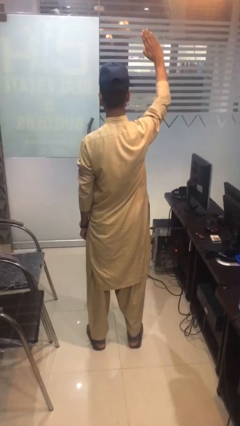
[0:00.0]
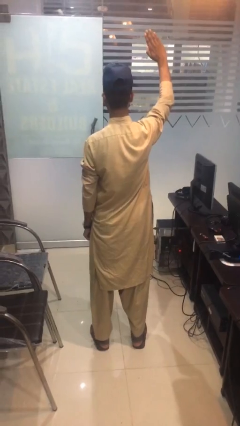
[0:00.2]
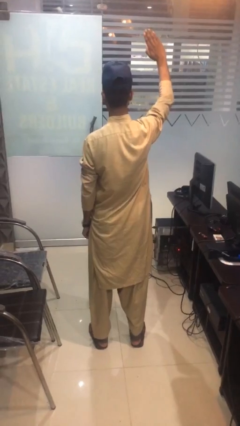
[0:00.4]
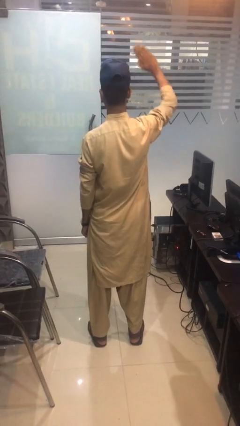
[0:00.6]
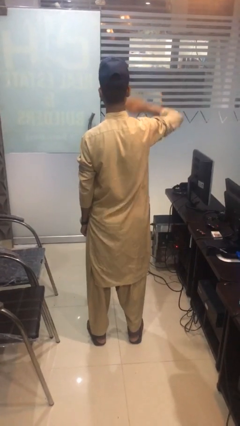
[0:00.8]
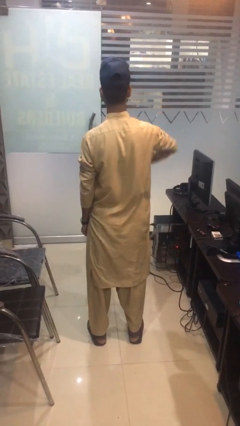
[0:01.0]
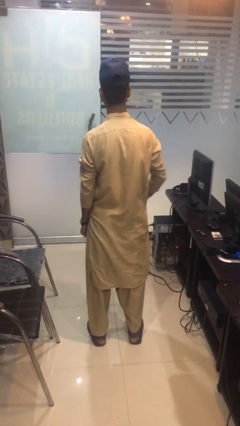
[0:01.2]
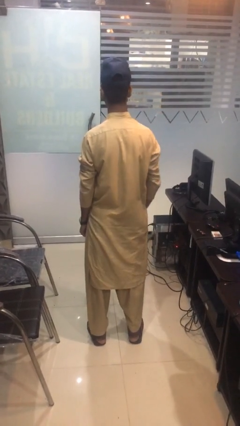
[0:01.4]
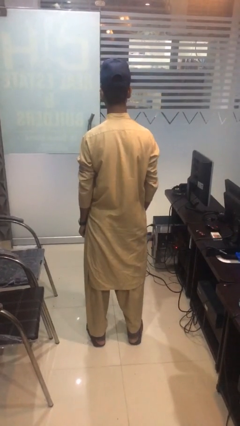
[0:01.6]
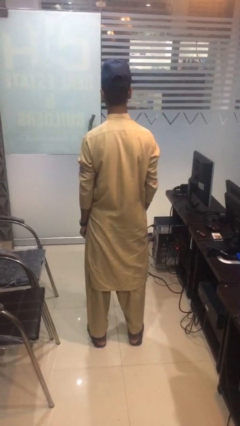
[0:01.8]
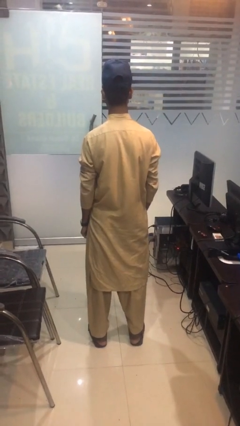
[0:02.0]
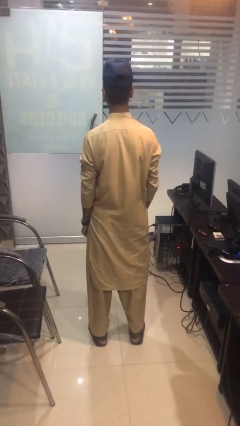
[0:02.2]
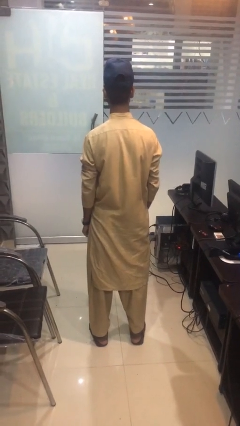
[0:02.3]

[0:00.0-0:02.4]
person gestures swipe down

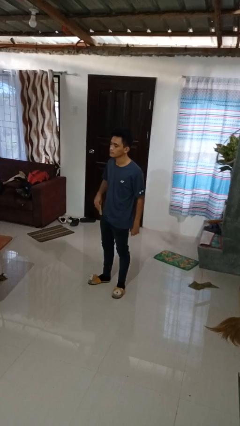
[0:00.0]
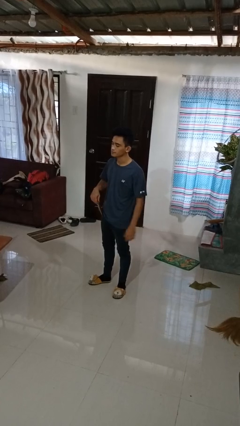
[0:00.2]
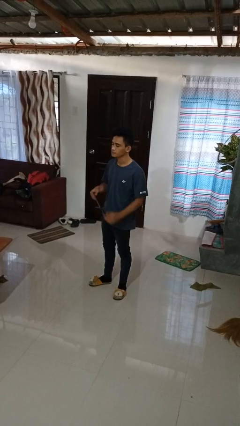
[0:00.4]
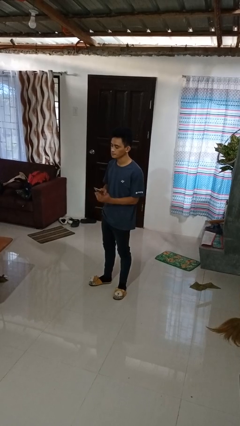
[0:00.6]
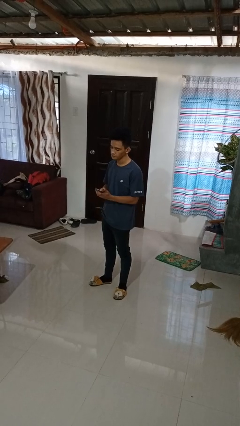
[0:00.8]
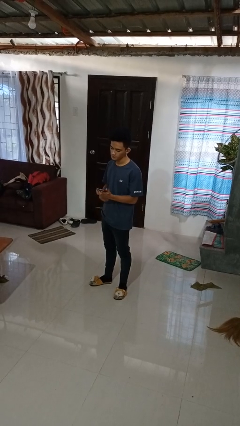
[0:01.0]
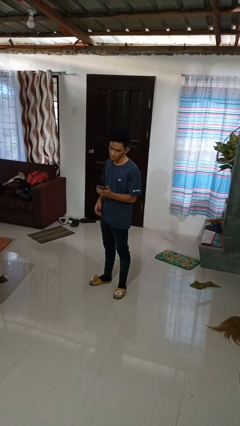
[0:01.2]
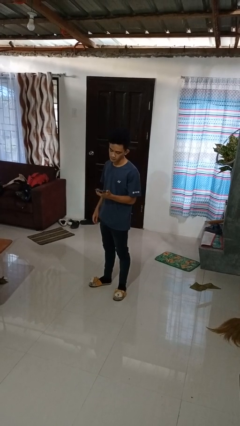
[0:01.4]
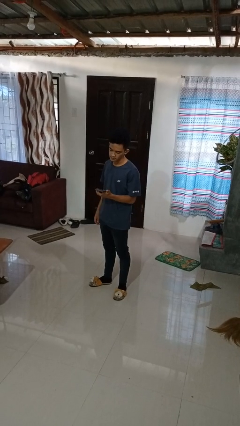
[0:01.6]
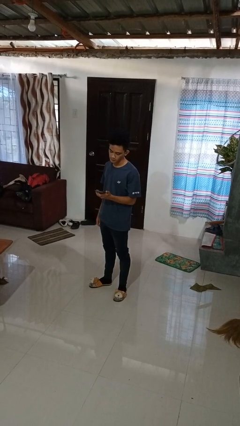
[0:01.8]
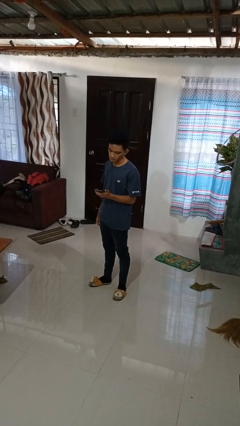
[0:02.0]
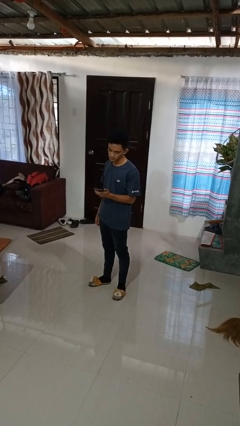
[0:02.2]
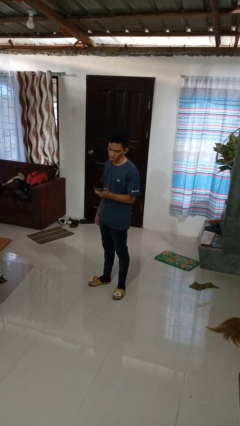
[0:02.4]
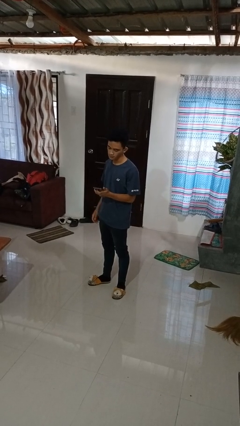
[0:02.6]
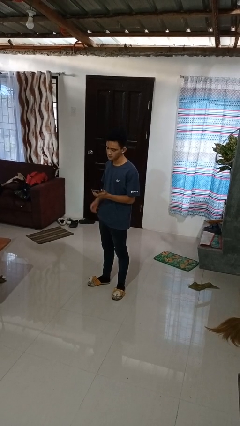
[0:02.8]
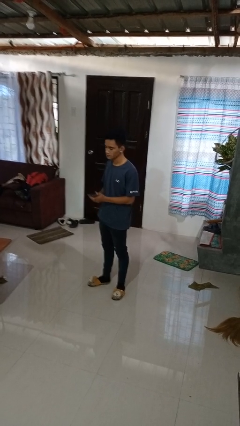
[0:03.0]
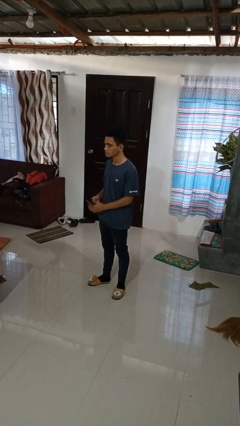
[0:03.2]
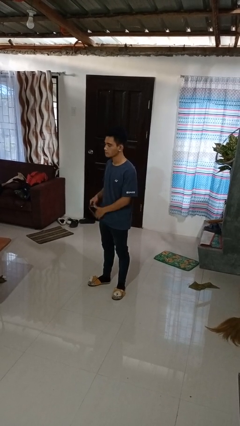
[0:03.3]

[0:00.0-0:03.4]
person takes phone from pocket

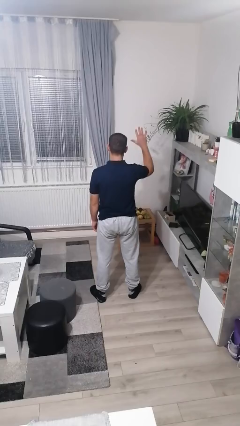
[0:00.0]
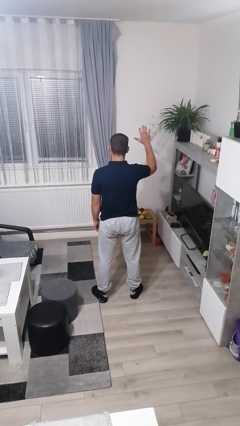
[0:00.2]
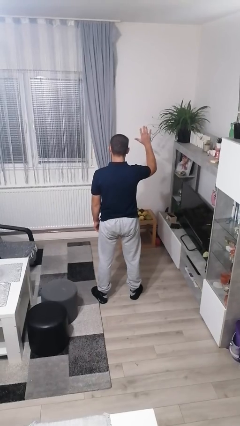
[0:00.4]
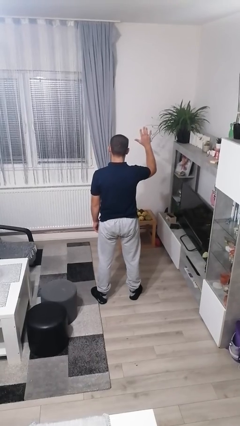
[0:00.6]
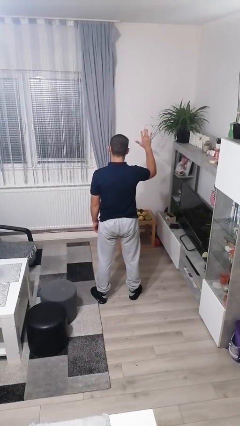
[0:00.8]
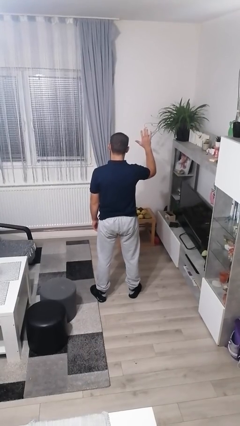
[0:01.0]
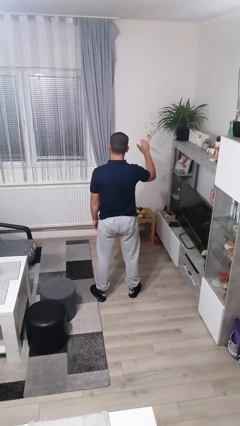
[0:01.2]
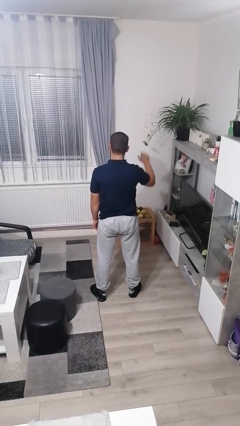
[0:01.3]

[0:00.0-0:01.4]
person gestures number five

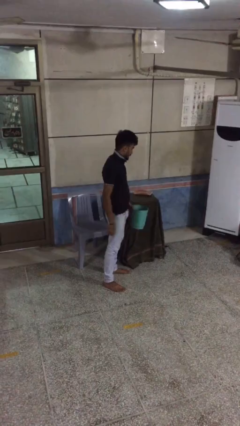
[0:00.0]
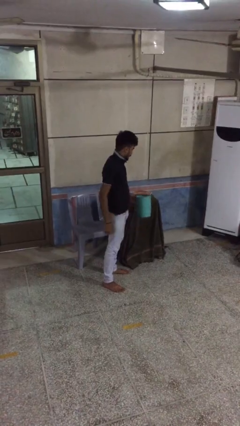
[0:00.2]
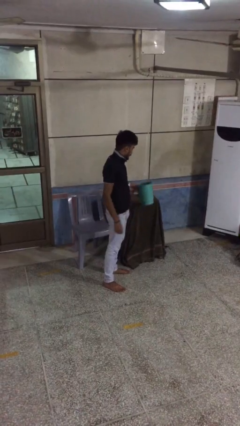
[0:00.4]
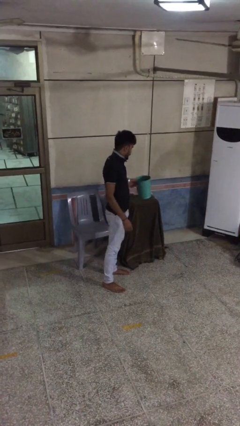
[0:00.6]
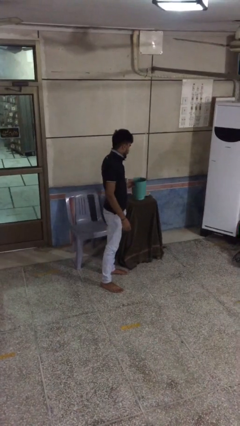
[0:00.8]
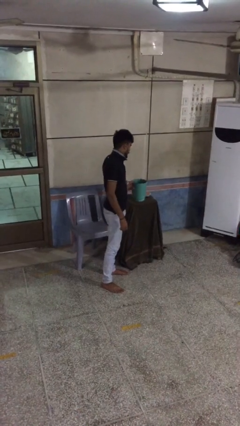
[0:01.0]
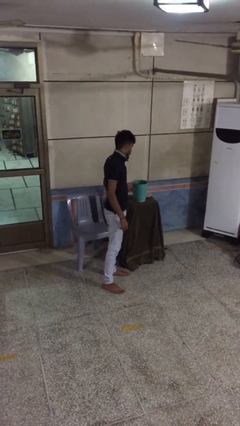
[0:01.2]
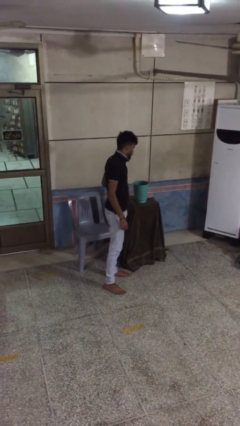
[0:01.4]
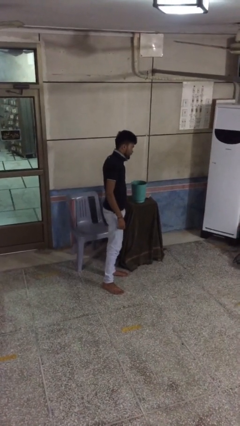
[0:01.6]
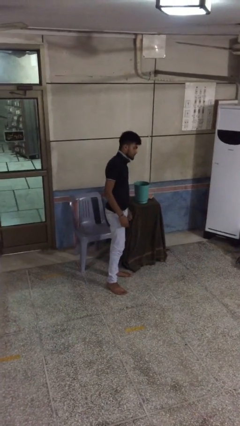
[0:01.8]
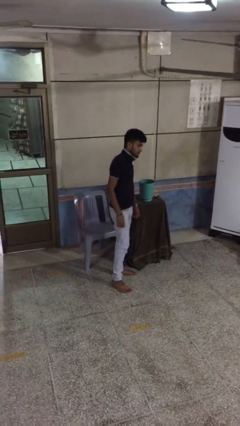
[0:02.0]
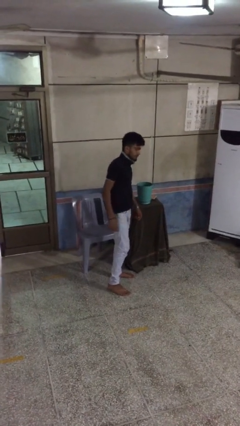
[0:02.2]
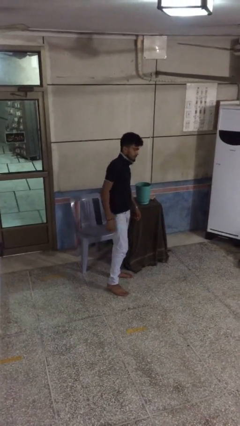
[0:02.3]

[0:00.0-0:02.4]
person puts down object on table

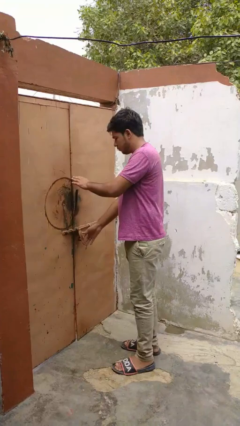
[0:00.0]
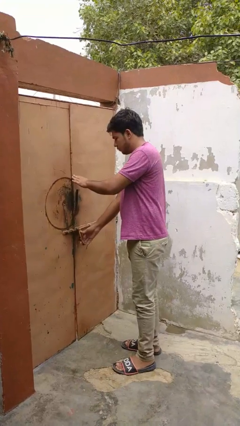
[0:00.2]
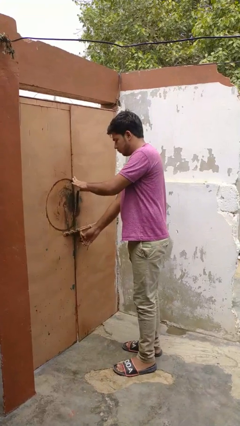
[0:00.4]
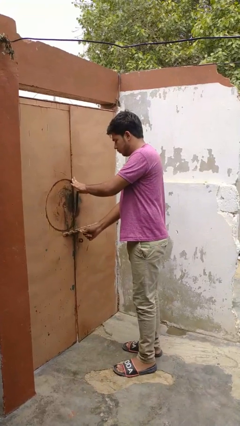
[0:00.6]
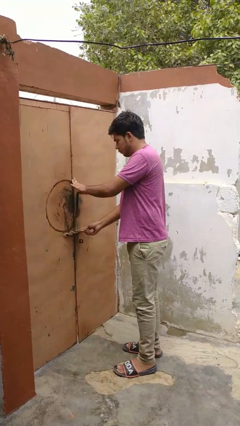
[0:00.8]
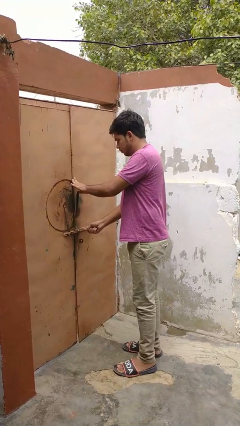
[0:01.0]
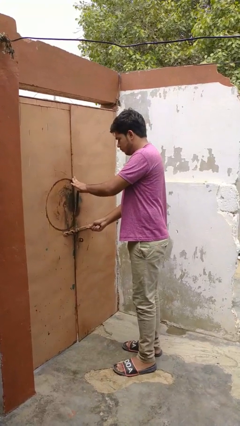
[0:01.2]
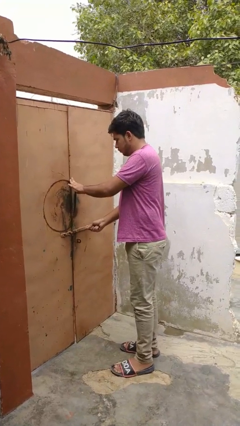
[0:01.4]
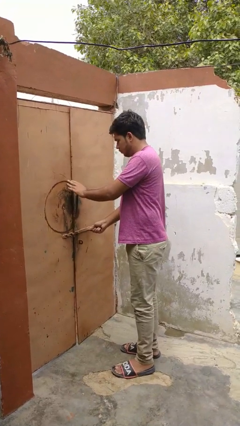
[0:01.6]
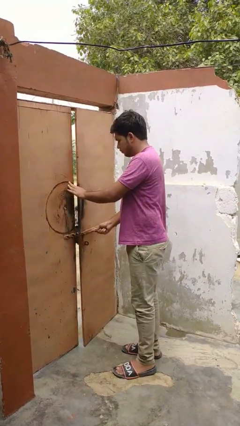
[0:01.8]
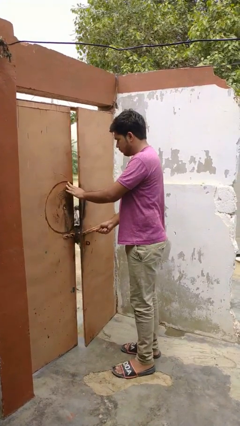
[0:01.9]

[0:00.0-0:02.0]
person unlocks door with keys

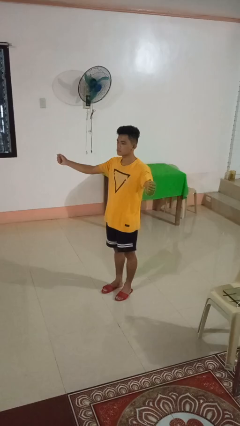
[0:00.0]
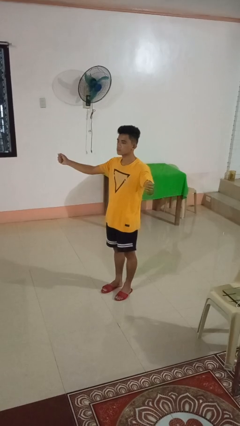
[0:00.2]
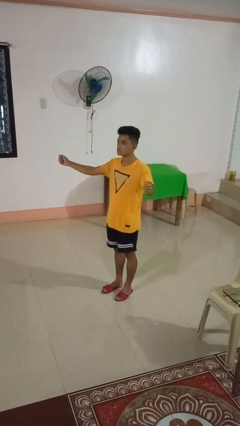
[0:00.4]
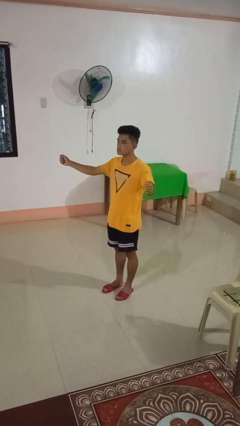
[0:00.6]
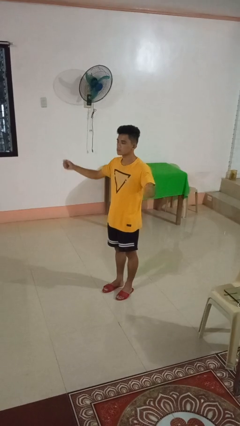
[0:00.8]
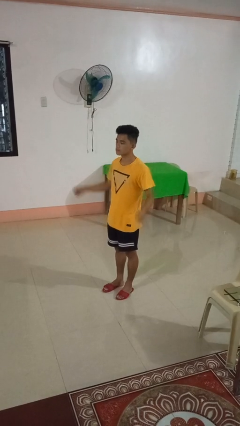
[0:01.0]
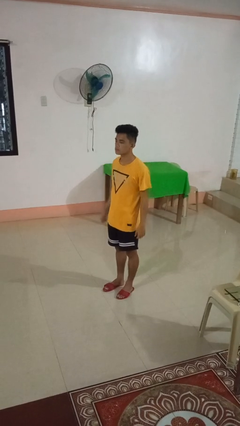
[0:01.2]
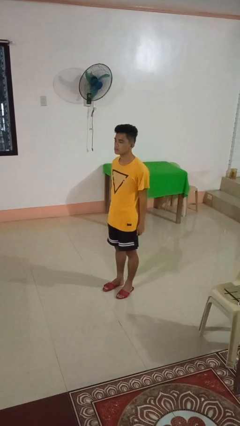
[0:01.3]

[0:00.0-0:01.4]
person gestures zoom out

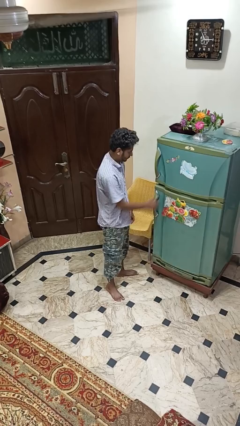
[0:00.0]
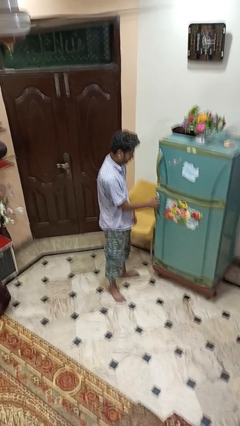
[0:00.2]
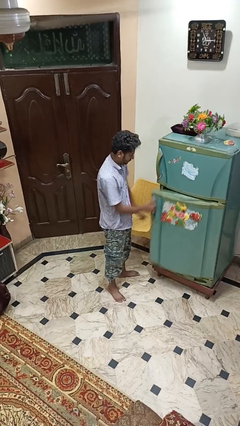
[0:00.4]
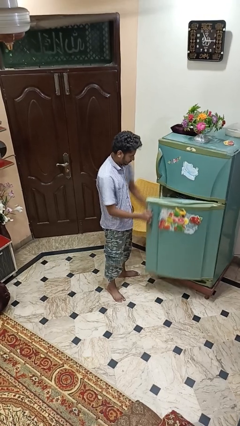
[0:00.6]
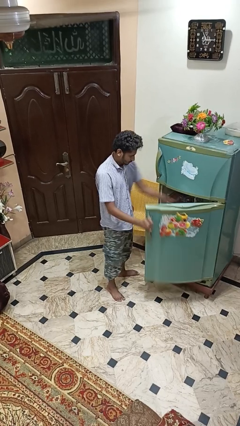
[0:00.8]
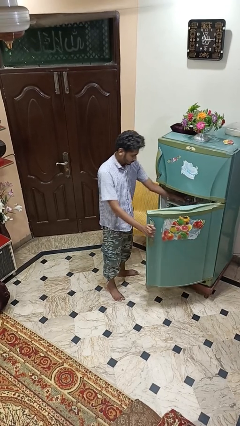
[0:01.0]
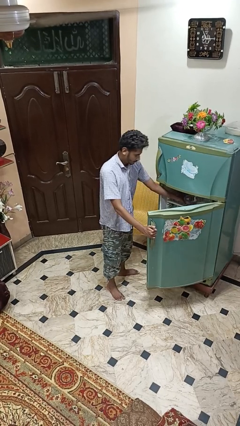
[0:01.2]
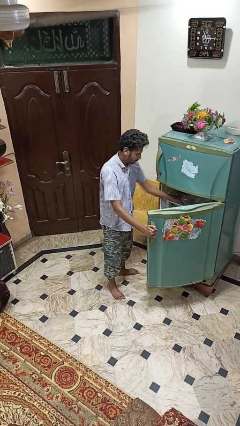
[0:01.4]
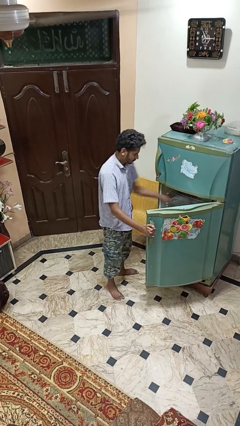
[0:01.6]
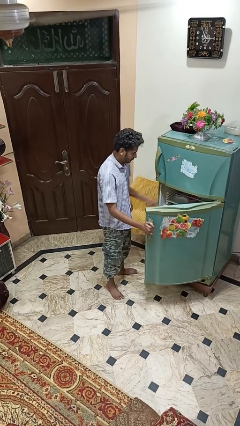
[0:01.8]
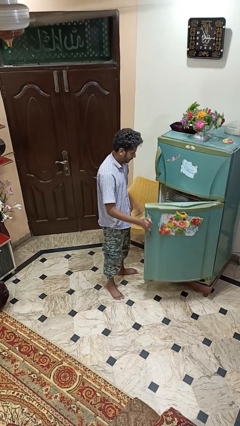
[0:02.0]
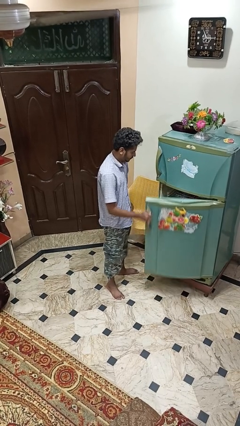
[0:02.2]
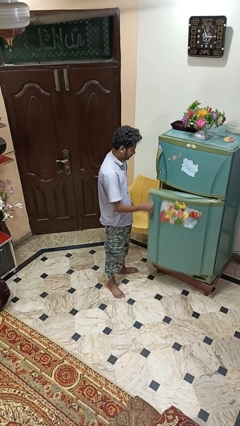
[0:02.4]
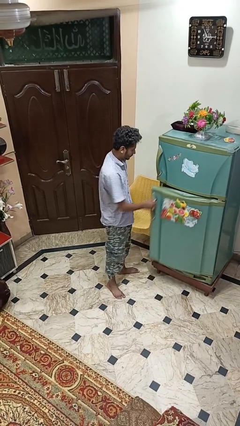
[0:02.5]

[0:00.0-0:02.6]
person takes object from refrigerator

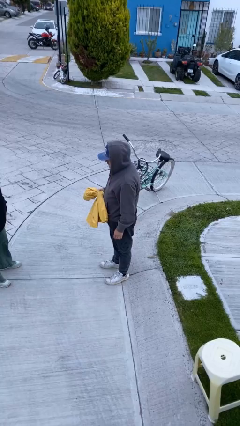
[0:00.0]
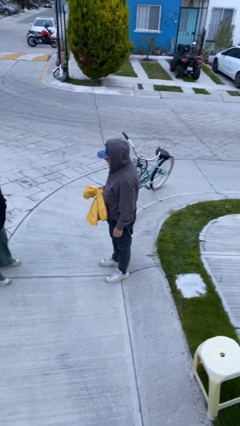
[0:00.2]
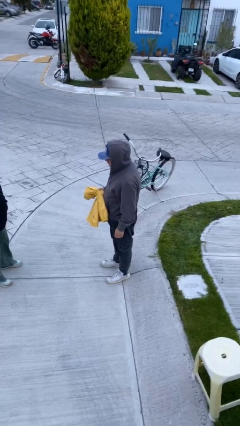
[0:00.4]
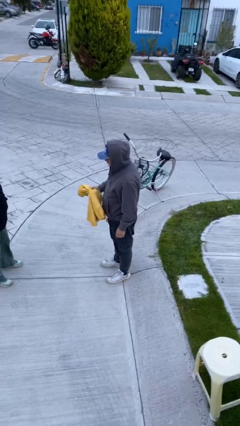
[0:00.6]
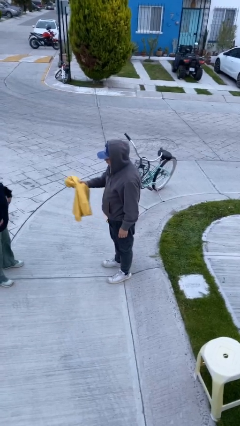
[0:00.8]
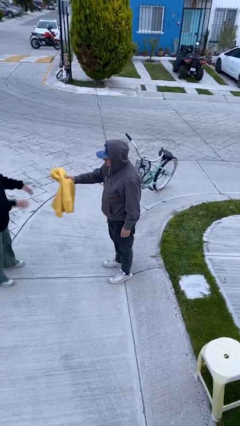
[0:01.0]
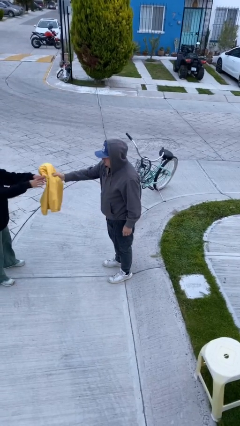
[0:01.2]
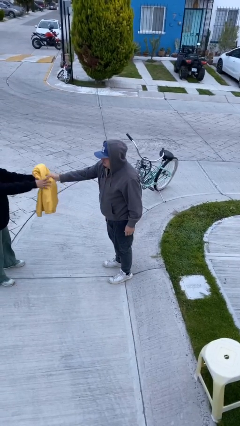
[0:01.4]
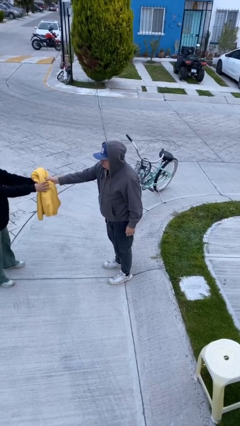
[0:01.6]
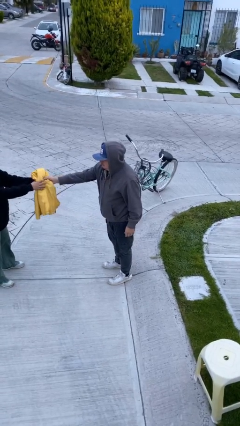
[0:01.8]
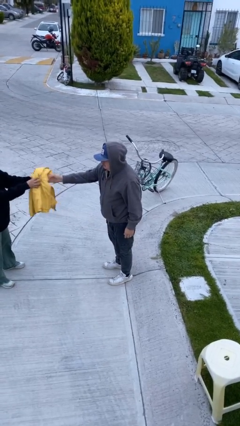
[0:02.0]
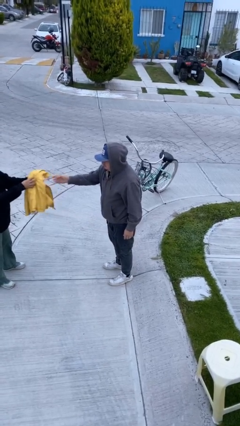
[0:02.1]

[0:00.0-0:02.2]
person transfers object to person
